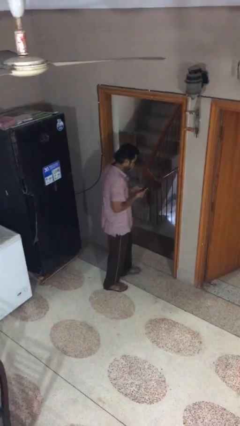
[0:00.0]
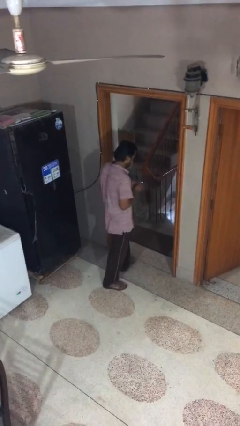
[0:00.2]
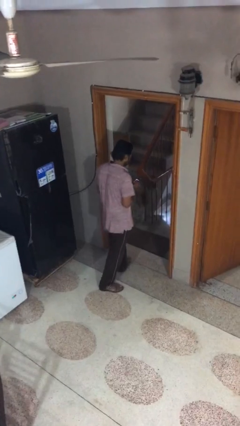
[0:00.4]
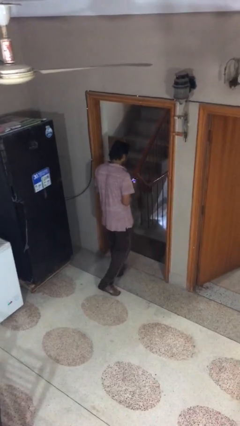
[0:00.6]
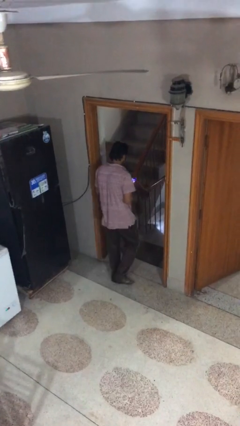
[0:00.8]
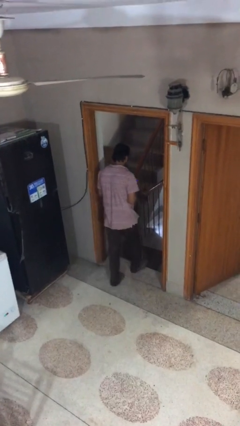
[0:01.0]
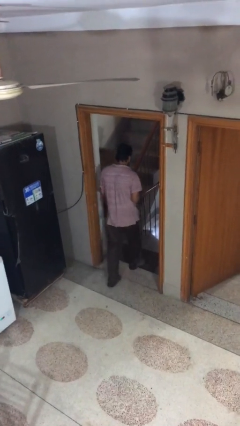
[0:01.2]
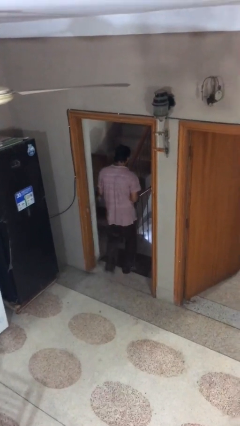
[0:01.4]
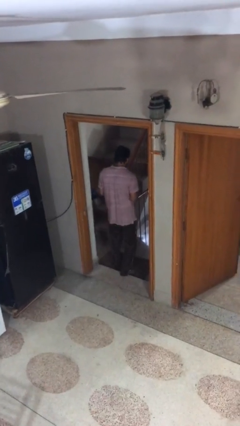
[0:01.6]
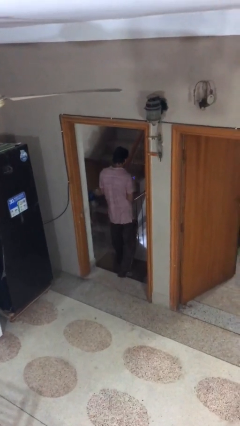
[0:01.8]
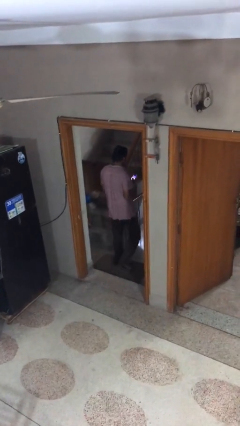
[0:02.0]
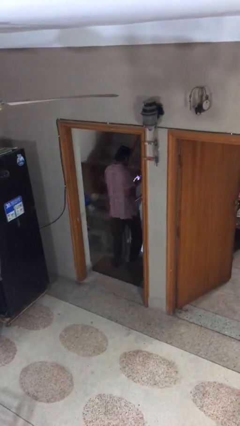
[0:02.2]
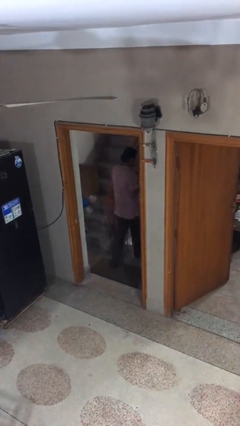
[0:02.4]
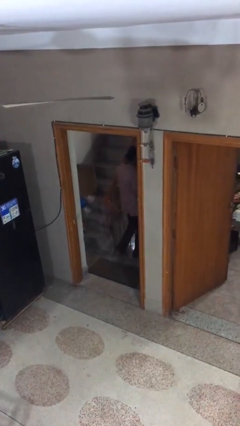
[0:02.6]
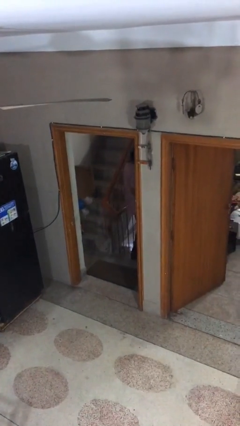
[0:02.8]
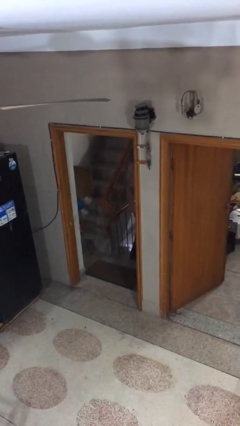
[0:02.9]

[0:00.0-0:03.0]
person exits scene through structure

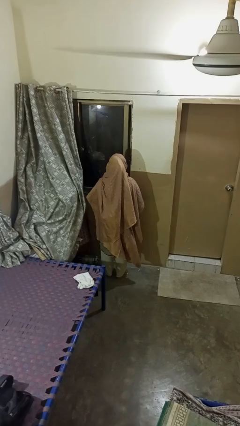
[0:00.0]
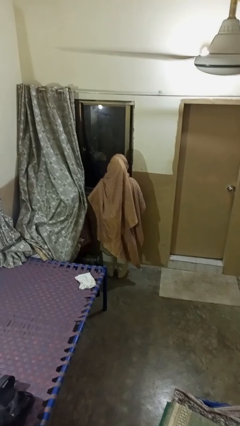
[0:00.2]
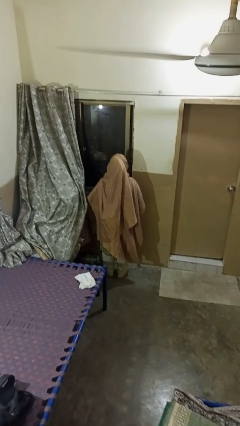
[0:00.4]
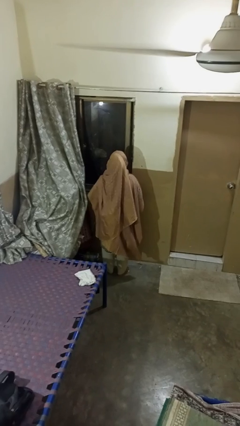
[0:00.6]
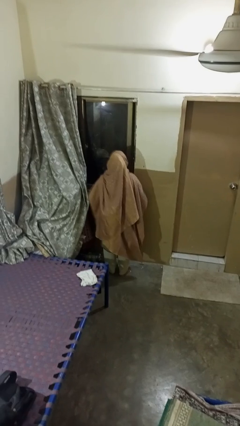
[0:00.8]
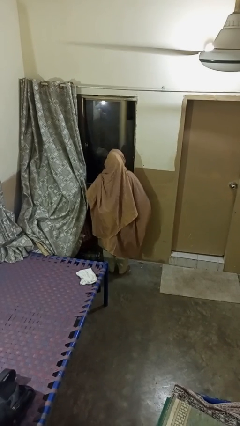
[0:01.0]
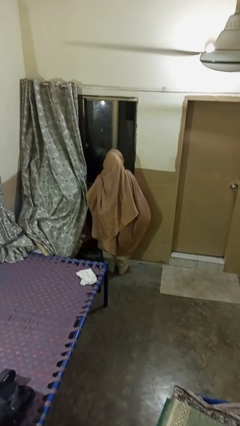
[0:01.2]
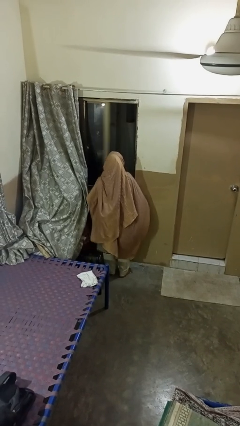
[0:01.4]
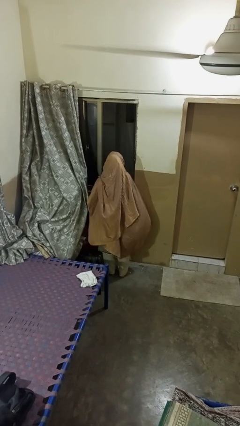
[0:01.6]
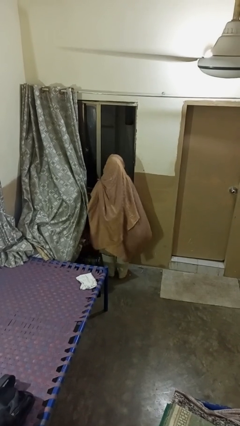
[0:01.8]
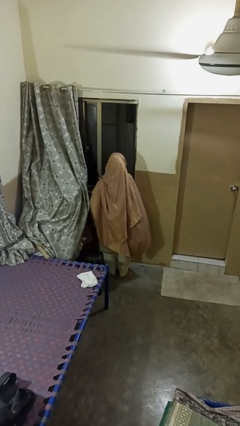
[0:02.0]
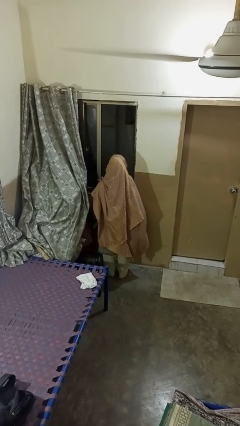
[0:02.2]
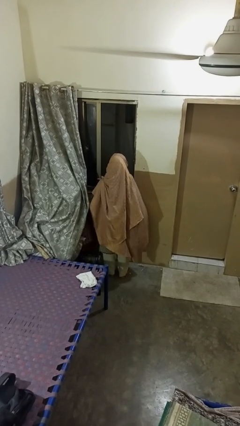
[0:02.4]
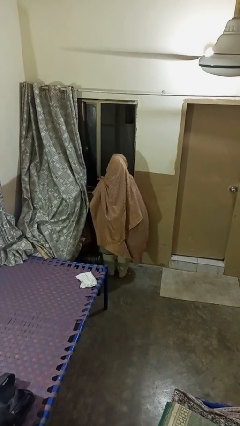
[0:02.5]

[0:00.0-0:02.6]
person opens home window

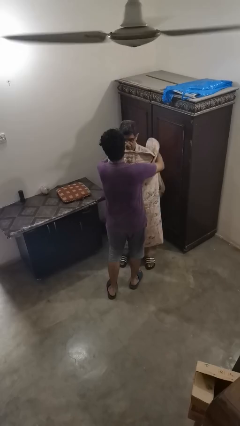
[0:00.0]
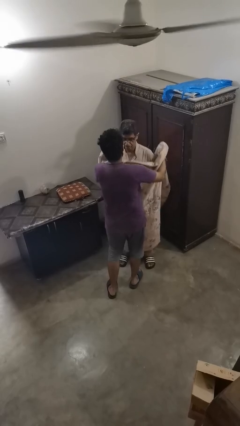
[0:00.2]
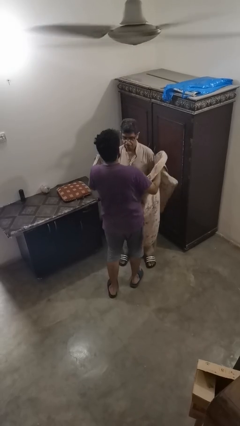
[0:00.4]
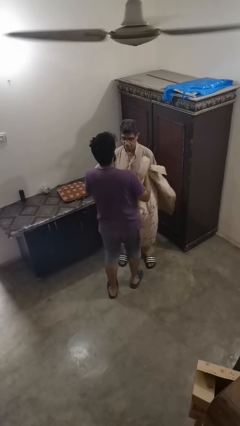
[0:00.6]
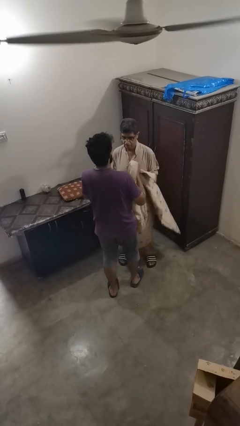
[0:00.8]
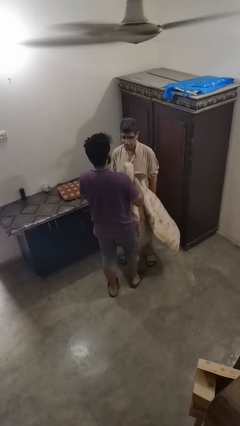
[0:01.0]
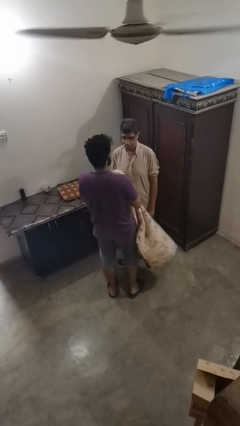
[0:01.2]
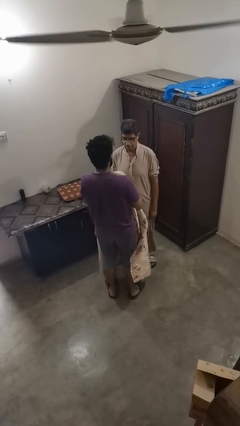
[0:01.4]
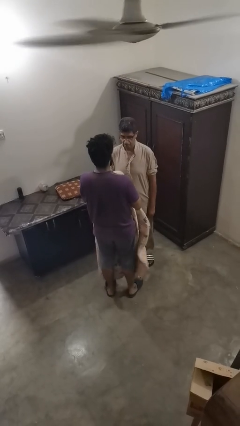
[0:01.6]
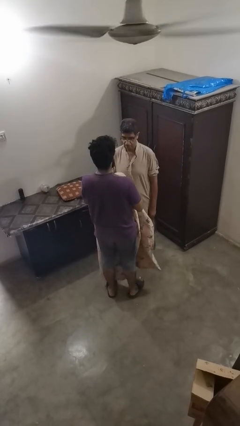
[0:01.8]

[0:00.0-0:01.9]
person uncovers friend with blanket

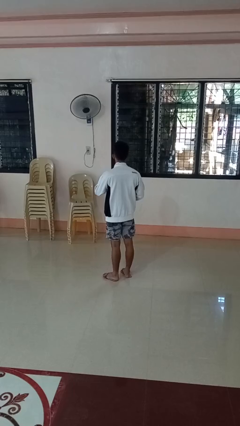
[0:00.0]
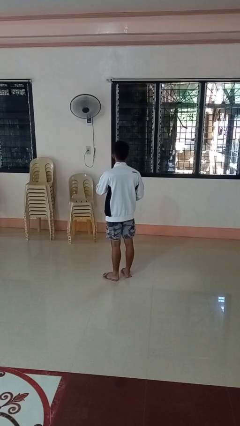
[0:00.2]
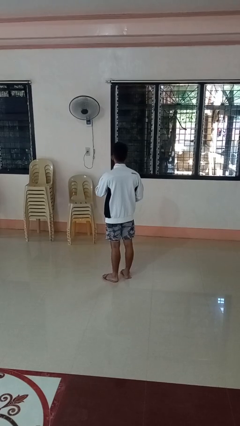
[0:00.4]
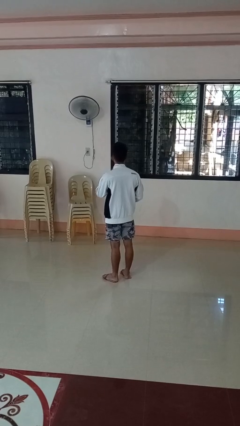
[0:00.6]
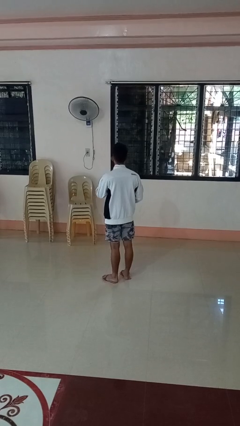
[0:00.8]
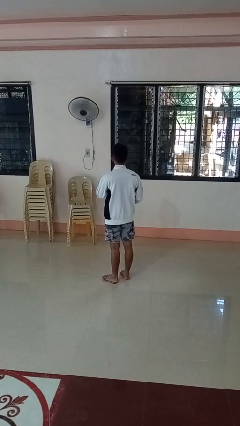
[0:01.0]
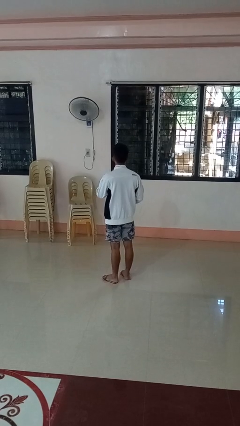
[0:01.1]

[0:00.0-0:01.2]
person zips up jacket

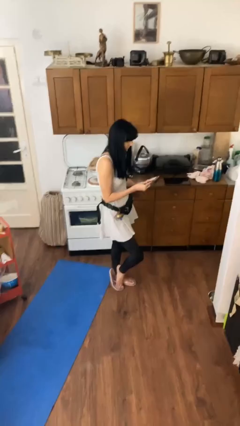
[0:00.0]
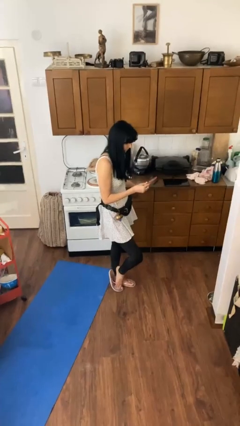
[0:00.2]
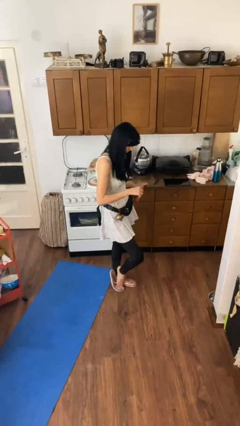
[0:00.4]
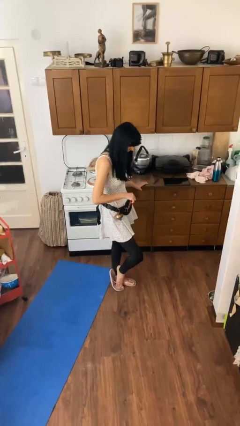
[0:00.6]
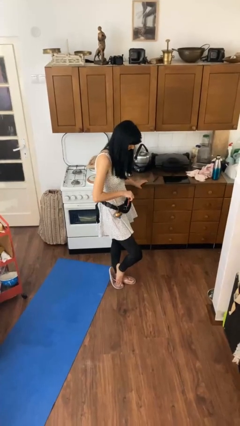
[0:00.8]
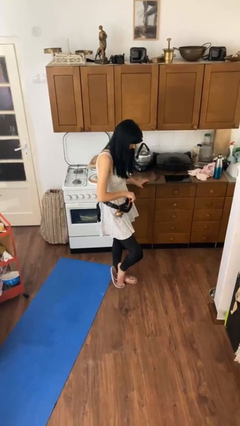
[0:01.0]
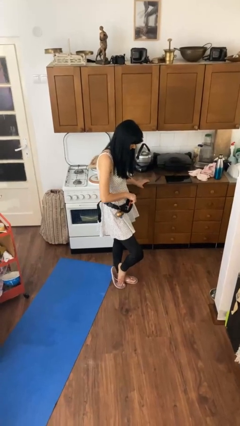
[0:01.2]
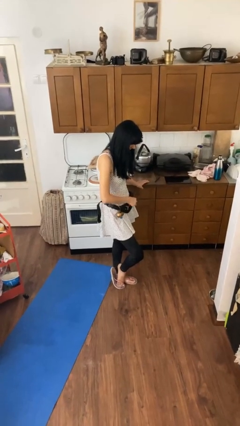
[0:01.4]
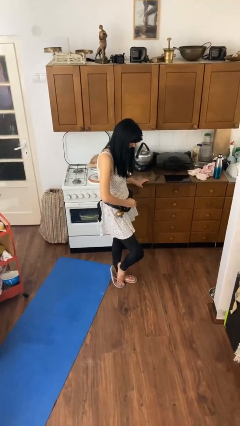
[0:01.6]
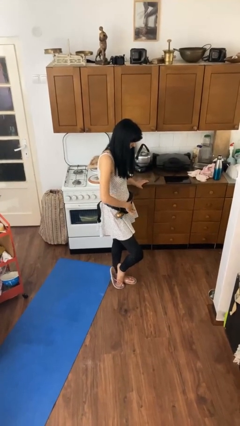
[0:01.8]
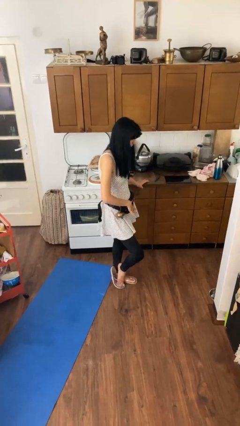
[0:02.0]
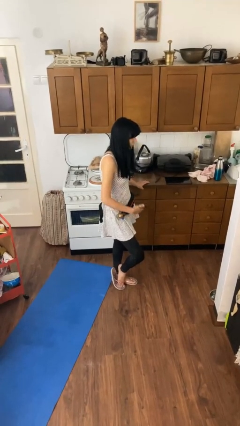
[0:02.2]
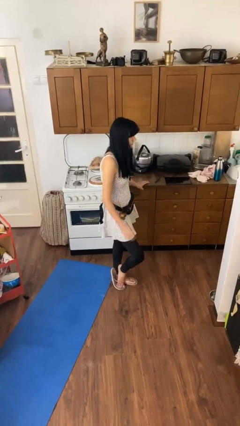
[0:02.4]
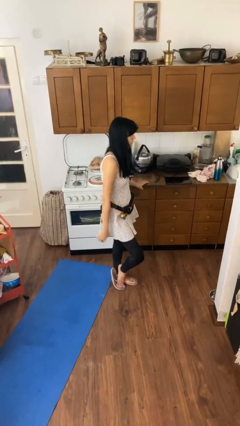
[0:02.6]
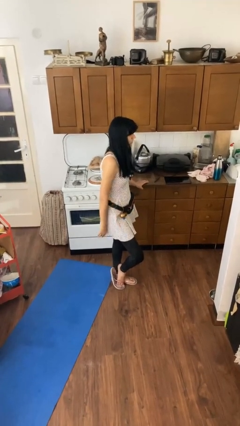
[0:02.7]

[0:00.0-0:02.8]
person puts phone into pocket

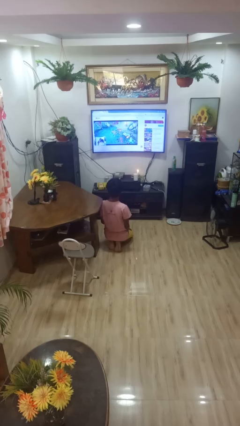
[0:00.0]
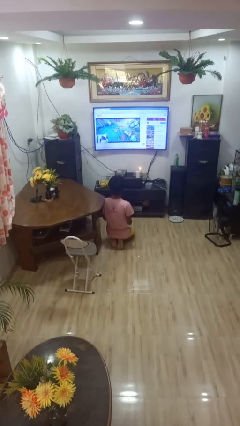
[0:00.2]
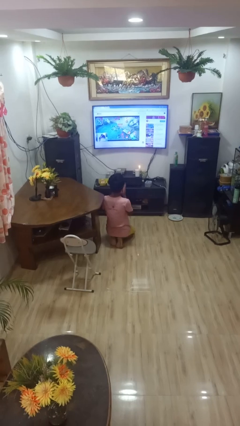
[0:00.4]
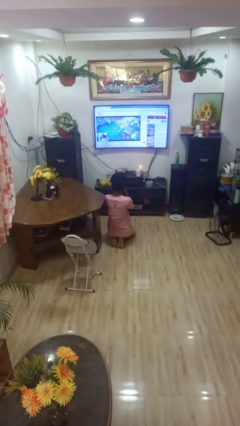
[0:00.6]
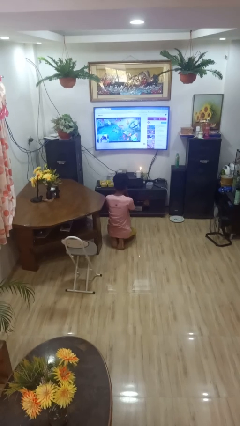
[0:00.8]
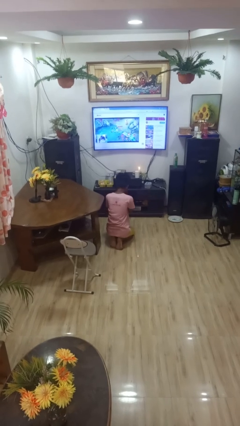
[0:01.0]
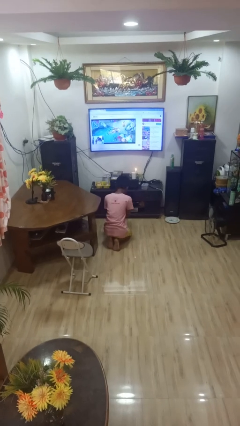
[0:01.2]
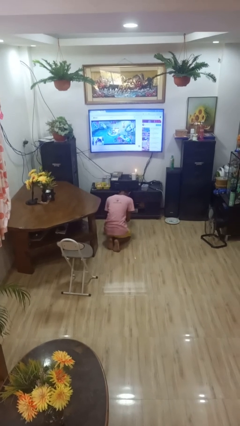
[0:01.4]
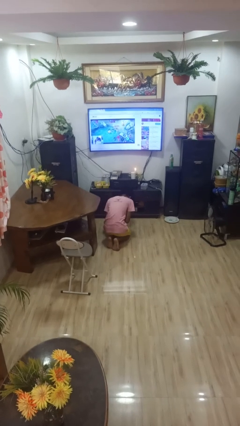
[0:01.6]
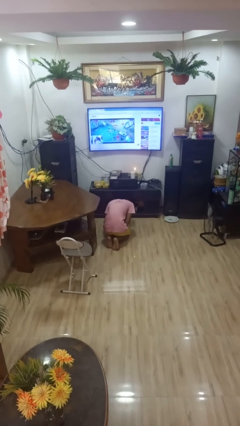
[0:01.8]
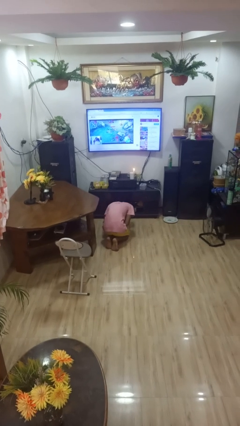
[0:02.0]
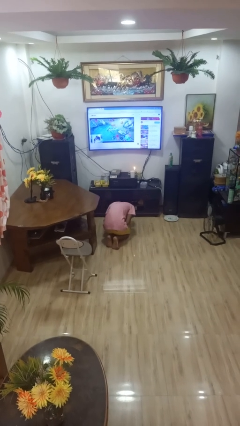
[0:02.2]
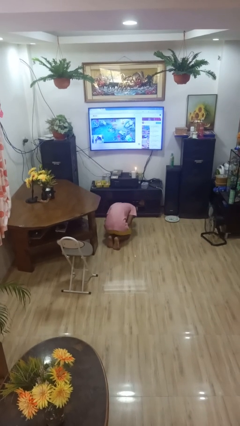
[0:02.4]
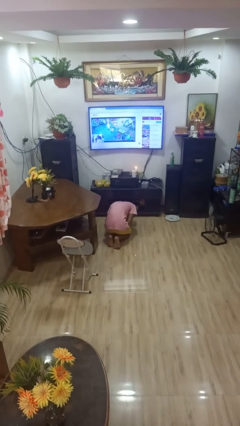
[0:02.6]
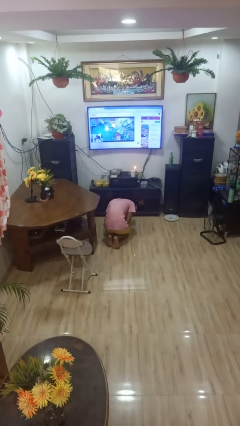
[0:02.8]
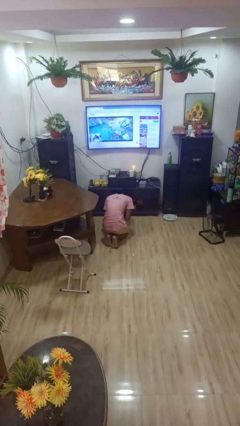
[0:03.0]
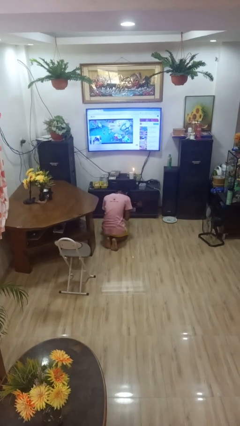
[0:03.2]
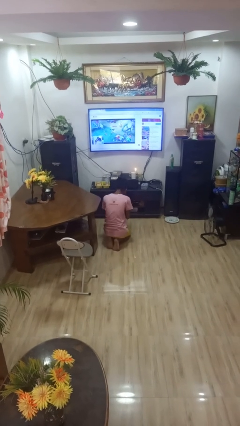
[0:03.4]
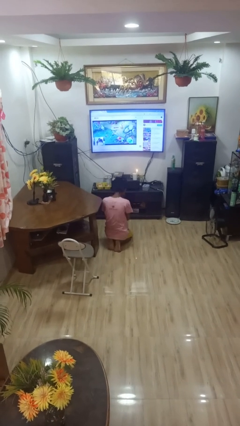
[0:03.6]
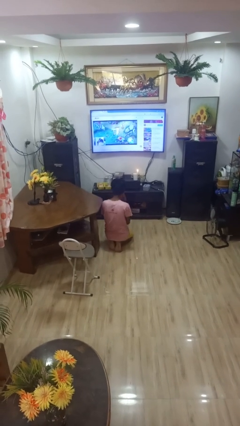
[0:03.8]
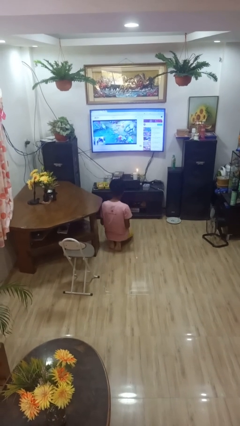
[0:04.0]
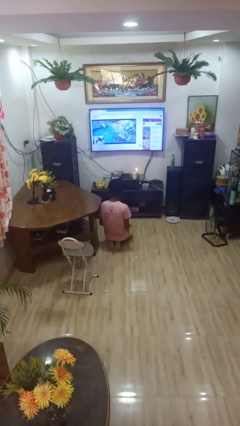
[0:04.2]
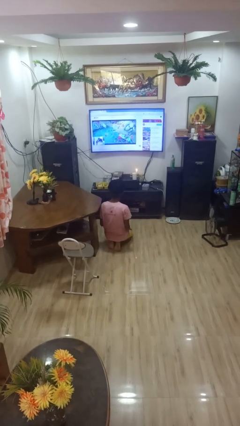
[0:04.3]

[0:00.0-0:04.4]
person prays

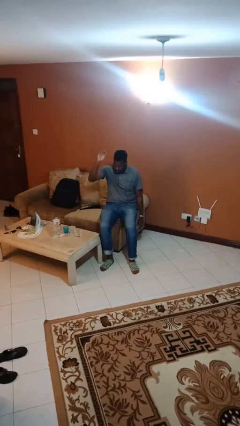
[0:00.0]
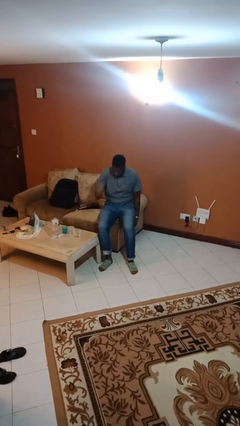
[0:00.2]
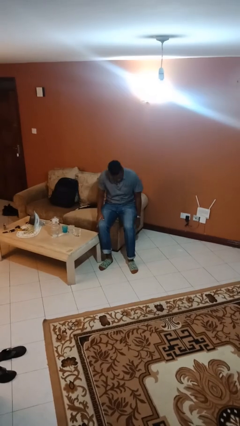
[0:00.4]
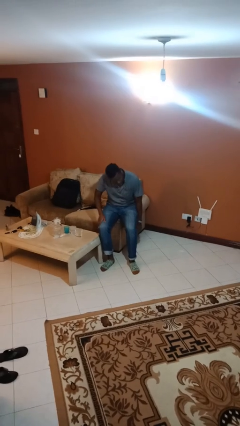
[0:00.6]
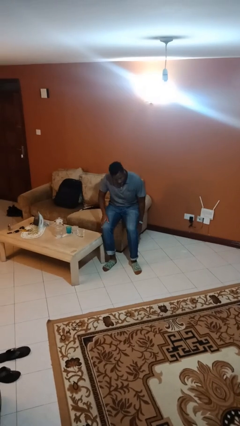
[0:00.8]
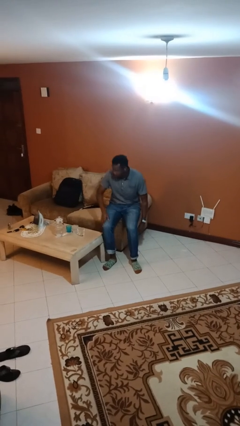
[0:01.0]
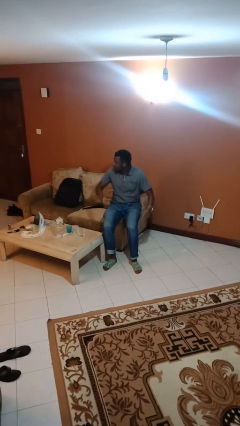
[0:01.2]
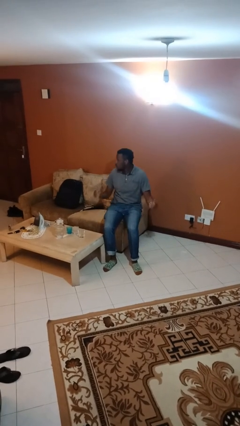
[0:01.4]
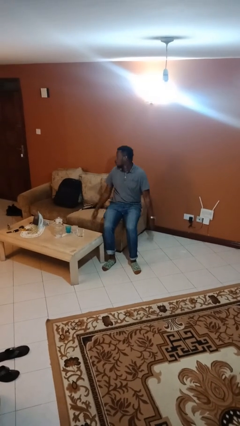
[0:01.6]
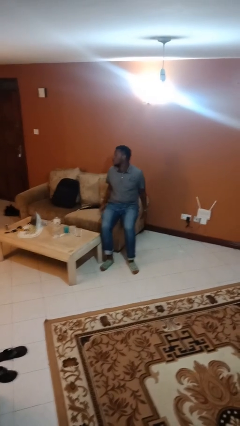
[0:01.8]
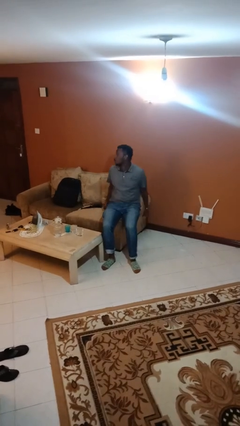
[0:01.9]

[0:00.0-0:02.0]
person slaps hands on thighs
